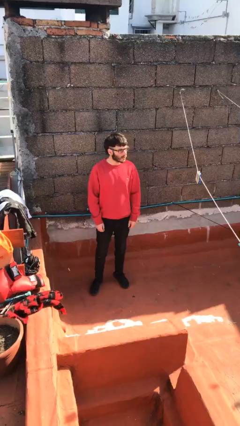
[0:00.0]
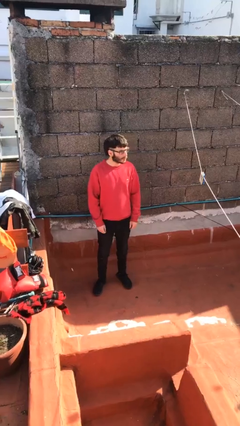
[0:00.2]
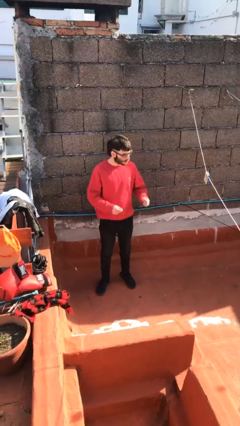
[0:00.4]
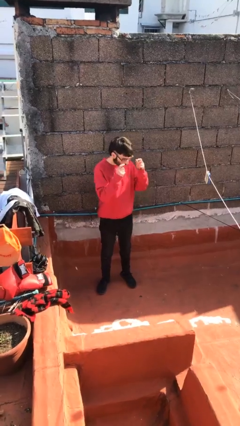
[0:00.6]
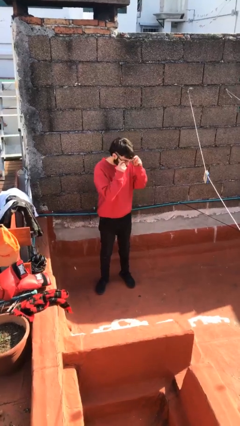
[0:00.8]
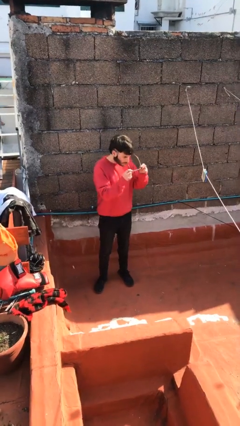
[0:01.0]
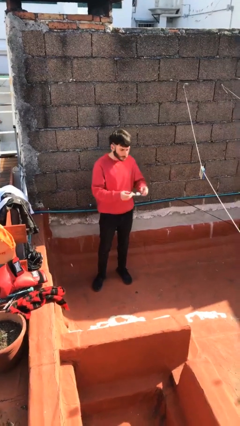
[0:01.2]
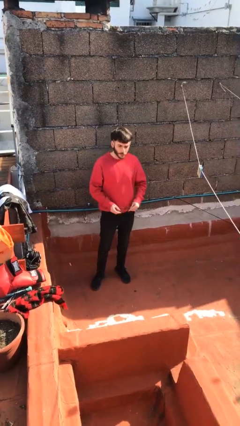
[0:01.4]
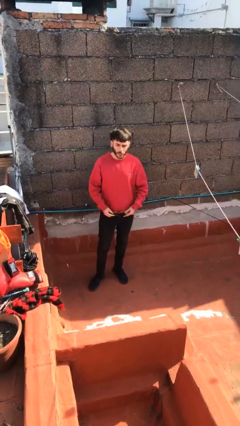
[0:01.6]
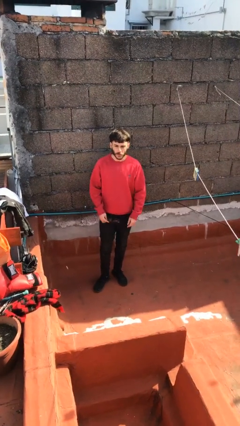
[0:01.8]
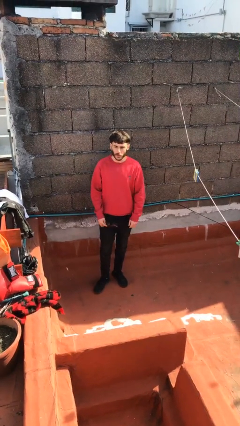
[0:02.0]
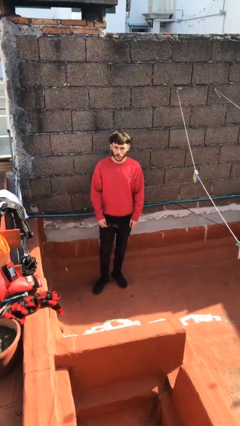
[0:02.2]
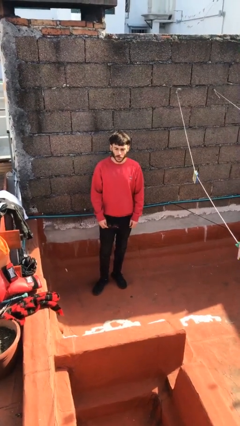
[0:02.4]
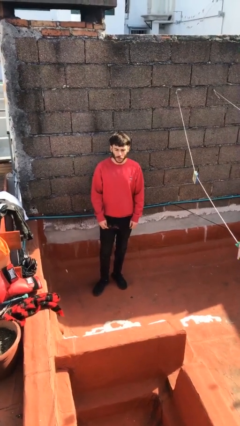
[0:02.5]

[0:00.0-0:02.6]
person takes off glasses

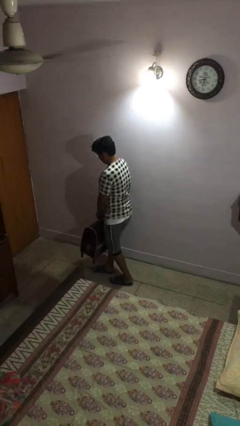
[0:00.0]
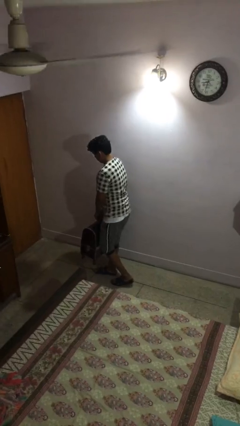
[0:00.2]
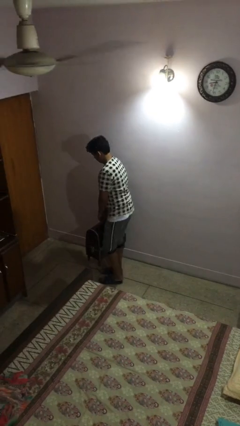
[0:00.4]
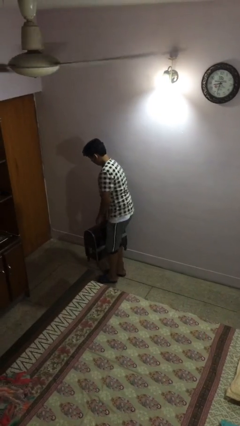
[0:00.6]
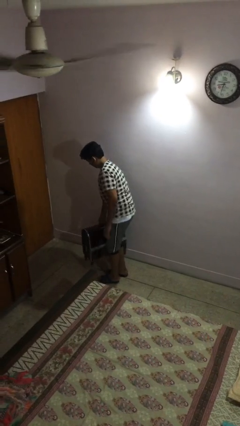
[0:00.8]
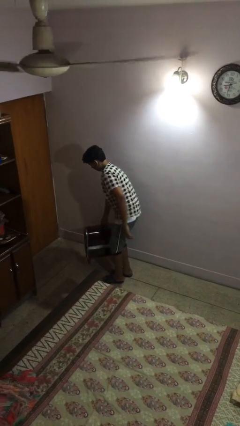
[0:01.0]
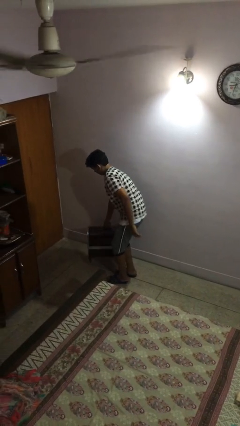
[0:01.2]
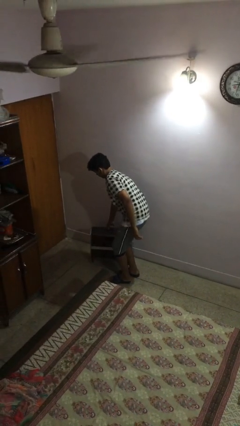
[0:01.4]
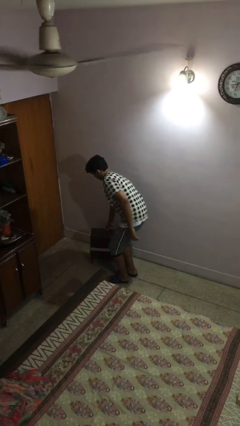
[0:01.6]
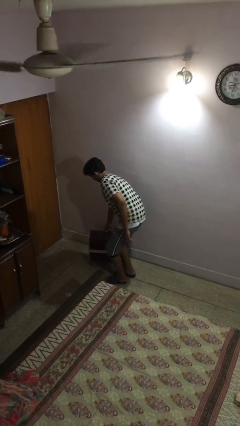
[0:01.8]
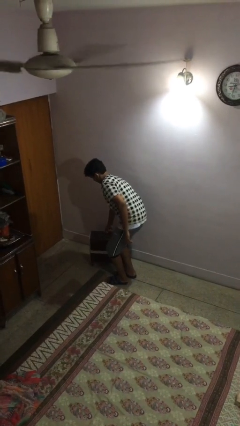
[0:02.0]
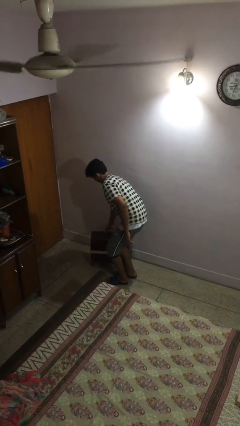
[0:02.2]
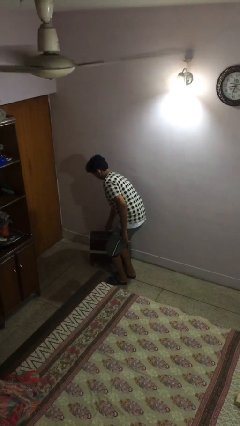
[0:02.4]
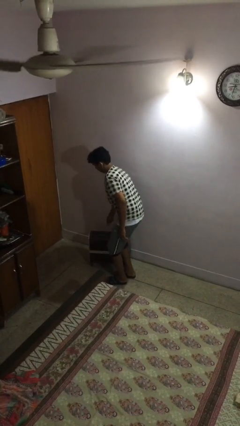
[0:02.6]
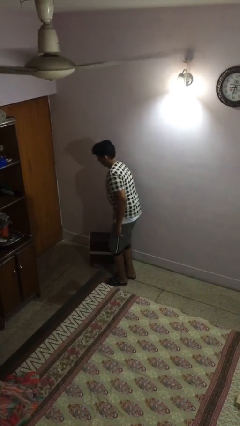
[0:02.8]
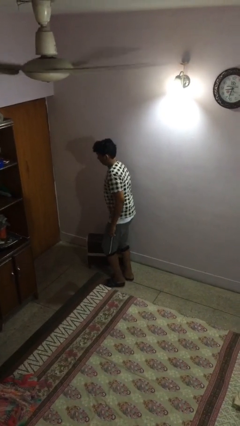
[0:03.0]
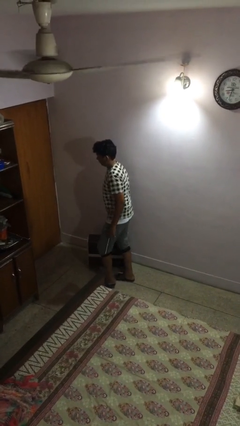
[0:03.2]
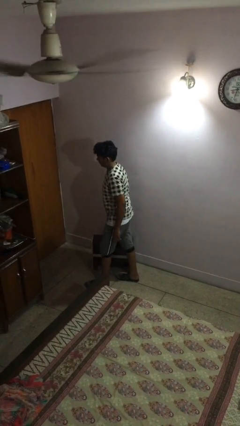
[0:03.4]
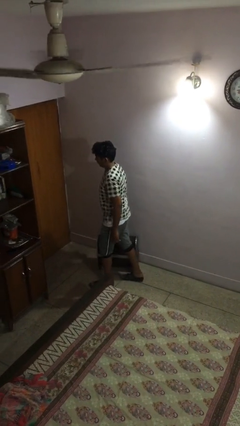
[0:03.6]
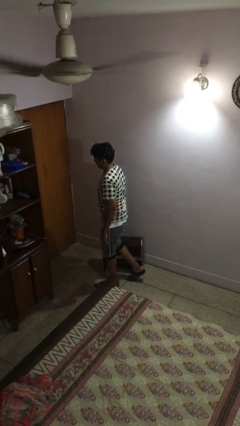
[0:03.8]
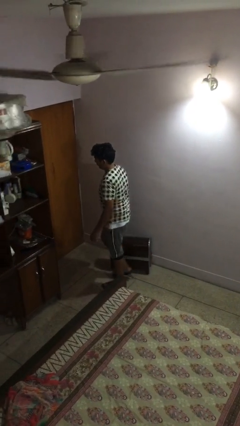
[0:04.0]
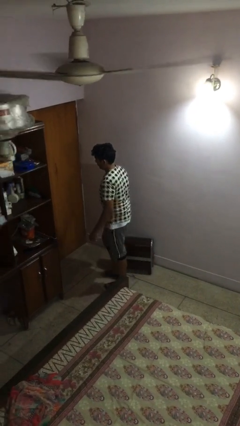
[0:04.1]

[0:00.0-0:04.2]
person puts down object on floor

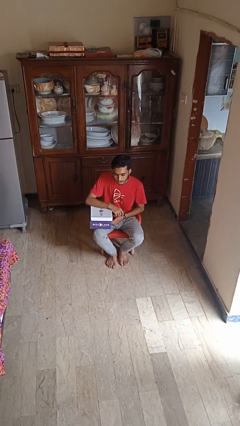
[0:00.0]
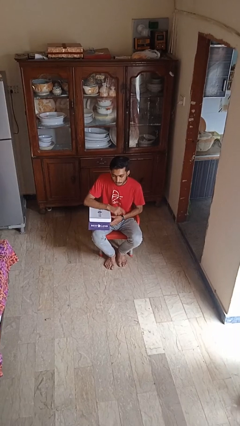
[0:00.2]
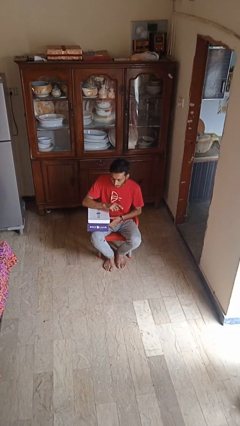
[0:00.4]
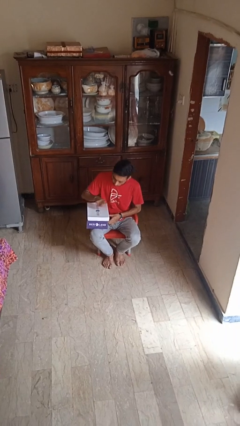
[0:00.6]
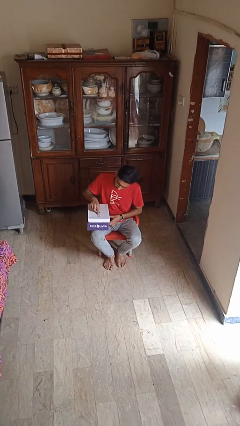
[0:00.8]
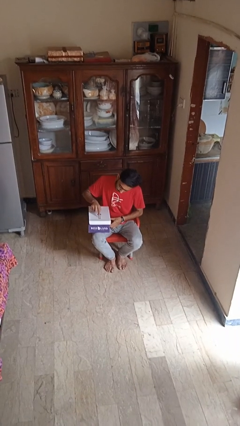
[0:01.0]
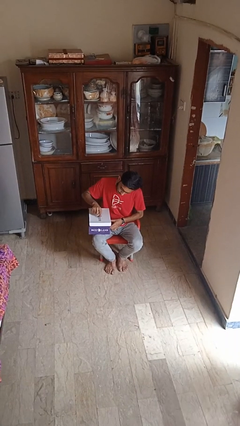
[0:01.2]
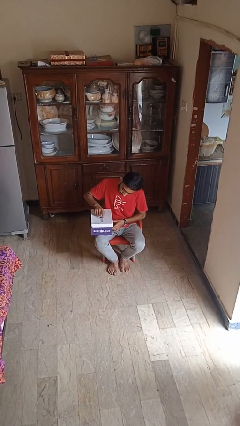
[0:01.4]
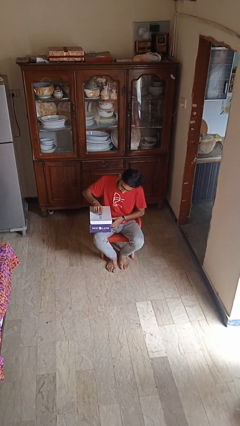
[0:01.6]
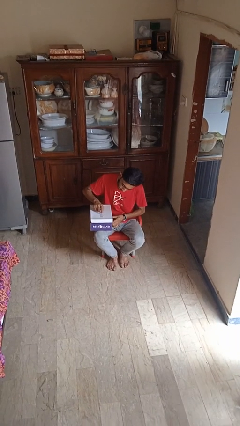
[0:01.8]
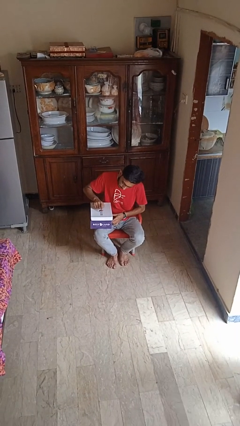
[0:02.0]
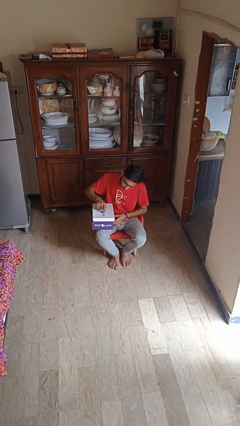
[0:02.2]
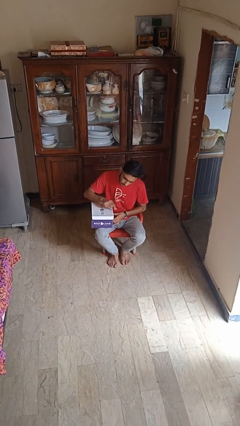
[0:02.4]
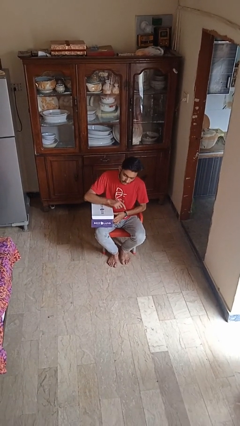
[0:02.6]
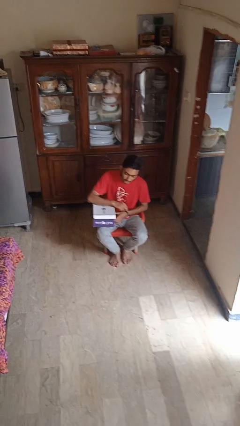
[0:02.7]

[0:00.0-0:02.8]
person taps object with finger

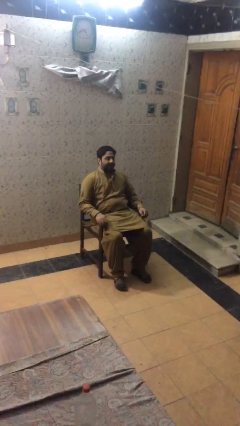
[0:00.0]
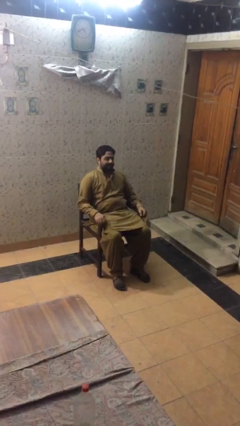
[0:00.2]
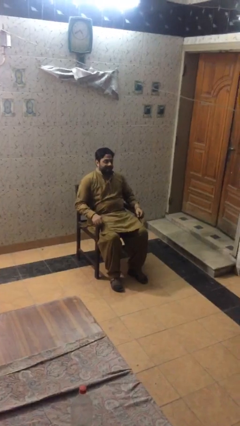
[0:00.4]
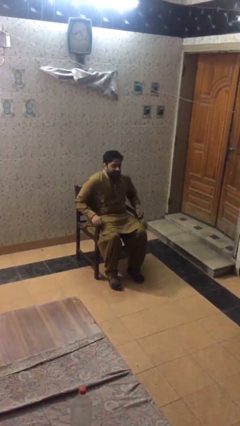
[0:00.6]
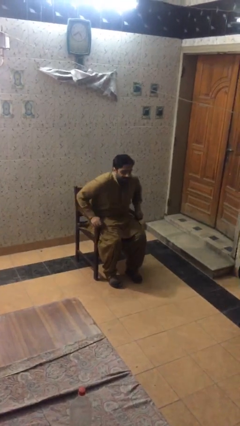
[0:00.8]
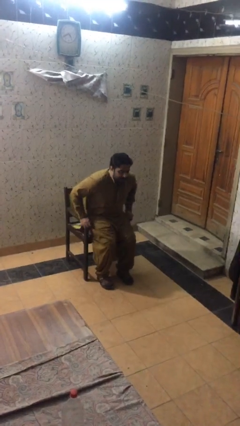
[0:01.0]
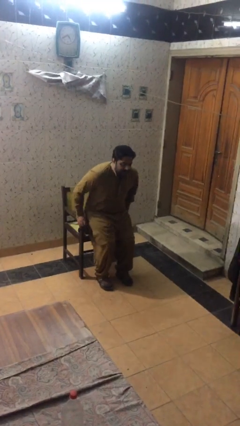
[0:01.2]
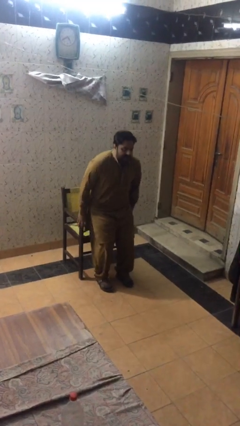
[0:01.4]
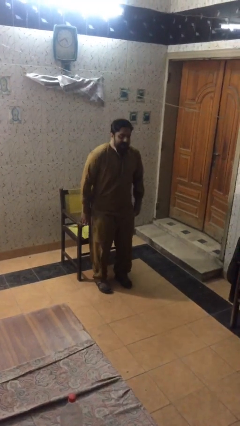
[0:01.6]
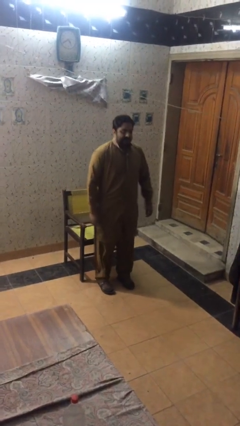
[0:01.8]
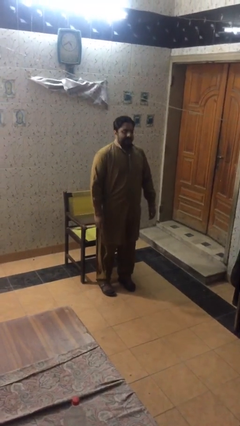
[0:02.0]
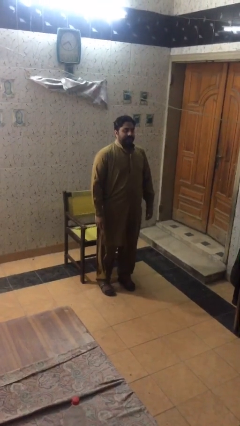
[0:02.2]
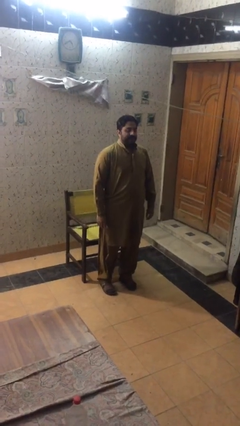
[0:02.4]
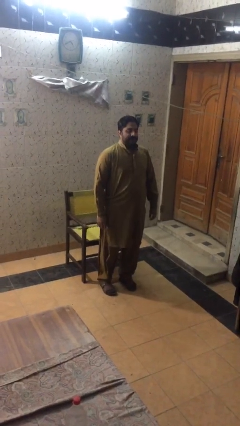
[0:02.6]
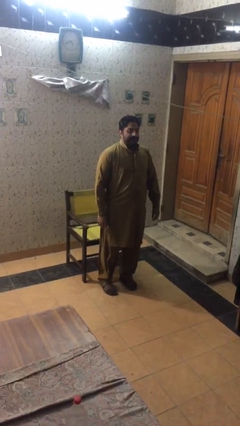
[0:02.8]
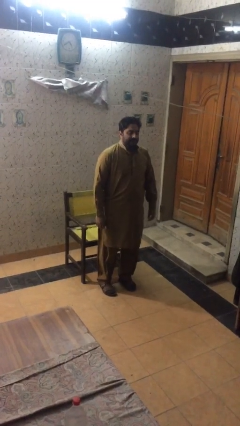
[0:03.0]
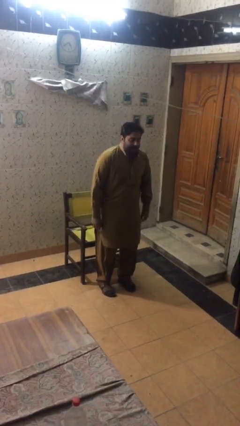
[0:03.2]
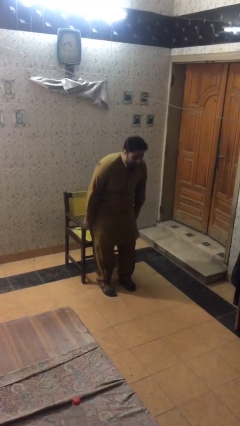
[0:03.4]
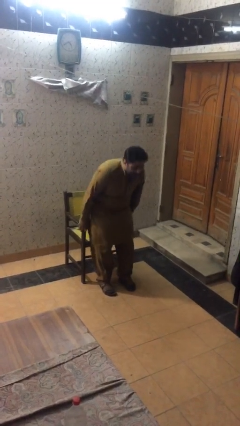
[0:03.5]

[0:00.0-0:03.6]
person stands up

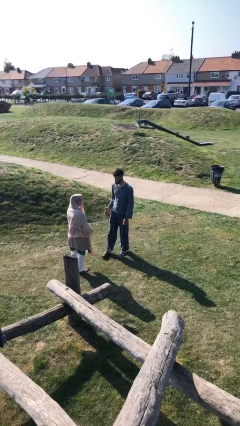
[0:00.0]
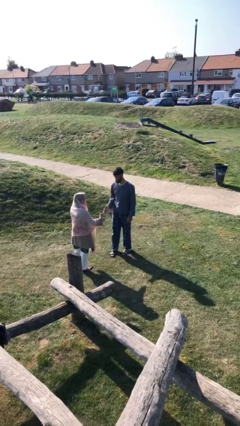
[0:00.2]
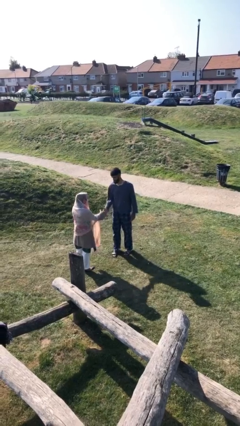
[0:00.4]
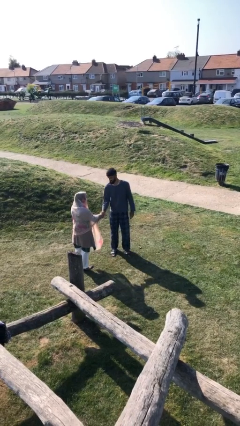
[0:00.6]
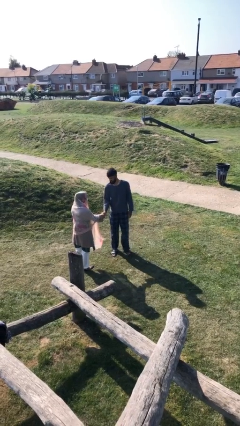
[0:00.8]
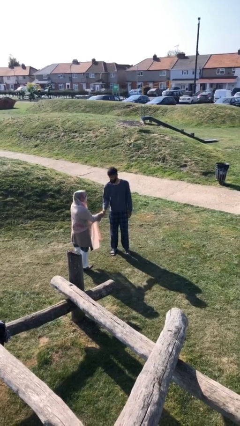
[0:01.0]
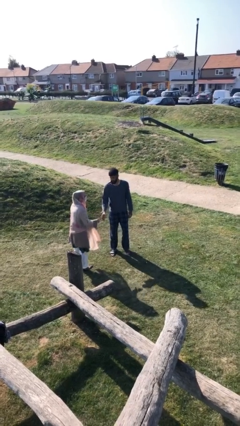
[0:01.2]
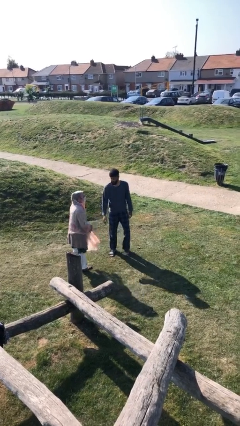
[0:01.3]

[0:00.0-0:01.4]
person shakes hand

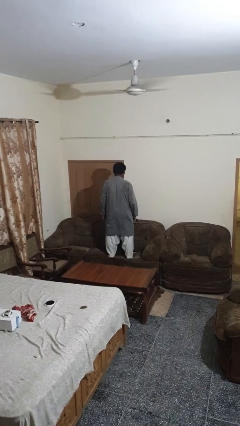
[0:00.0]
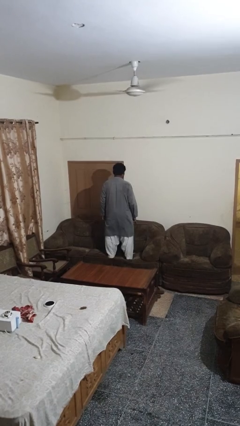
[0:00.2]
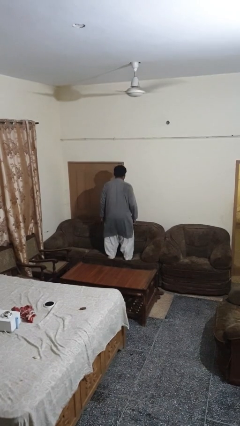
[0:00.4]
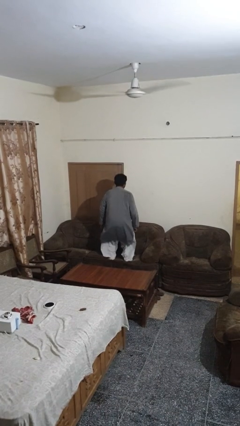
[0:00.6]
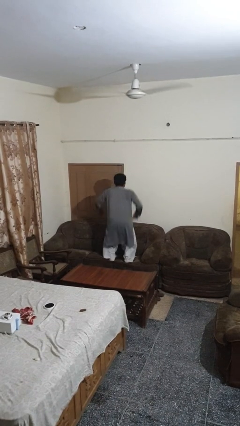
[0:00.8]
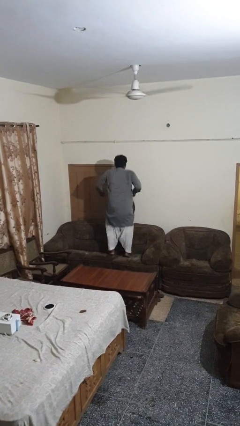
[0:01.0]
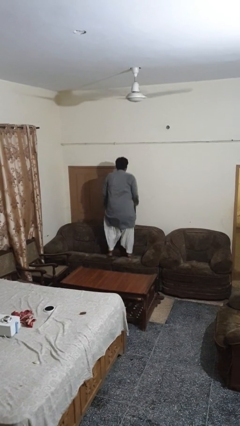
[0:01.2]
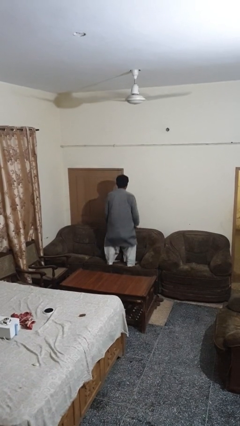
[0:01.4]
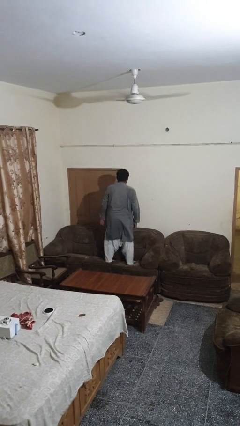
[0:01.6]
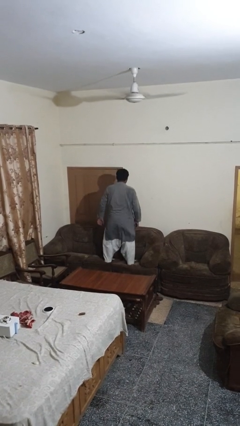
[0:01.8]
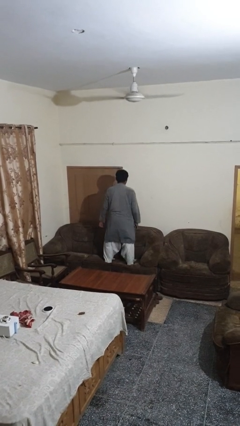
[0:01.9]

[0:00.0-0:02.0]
person jumps on couch

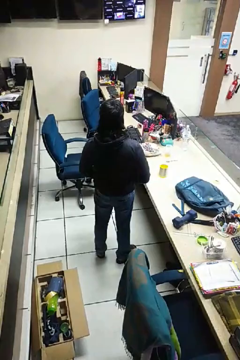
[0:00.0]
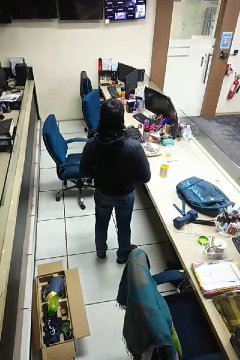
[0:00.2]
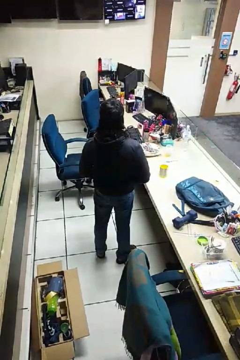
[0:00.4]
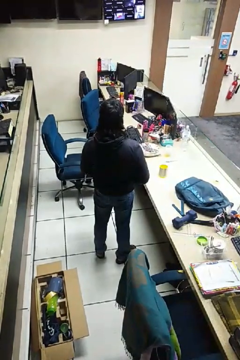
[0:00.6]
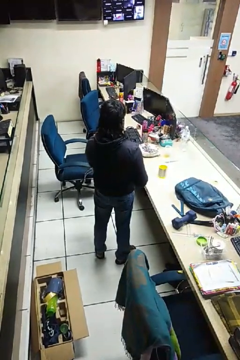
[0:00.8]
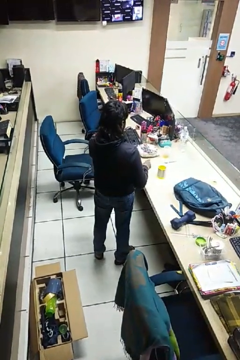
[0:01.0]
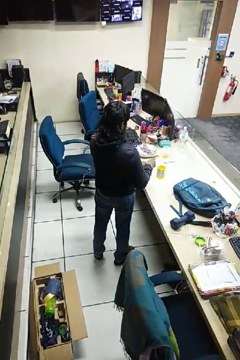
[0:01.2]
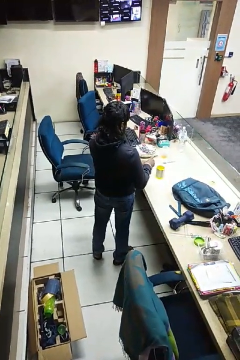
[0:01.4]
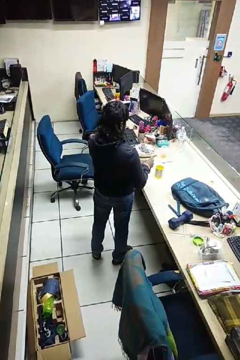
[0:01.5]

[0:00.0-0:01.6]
person opens beverage can
